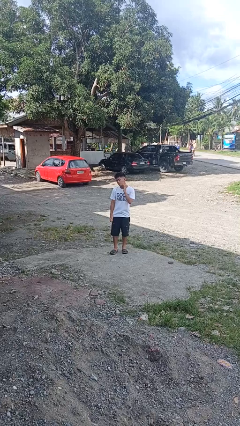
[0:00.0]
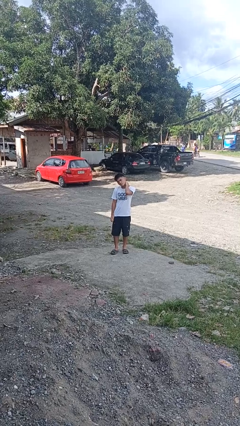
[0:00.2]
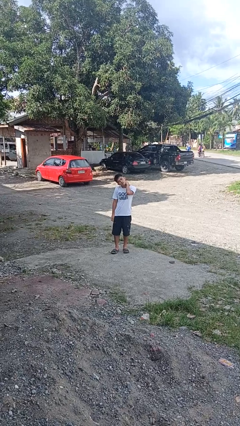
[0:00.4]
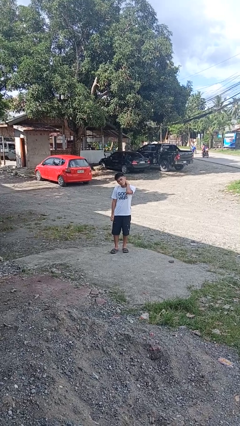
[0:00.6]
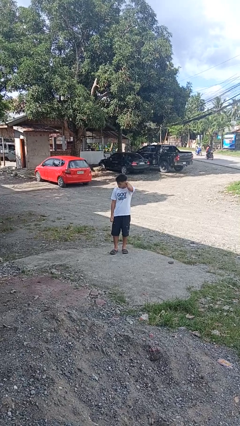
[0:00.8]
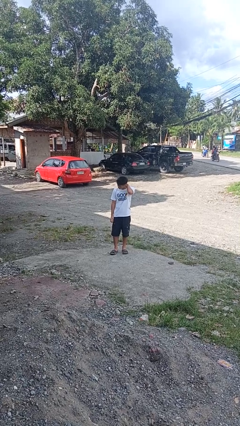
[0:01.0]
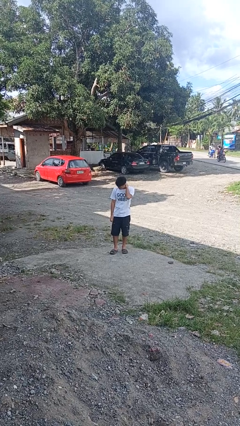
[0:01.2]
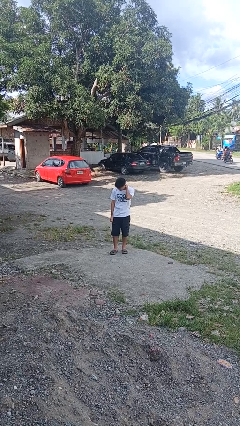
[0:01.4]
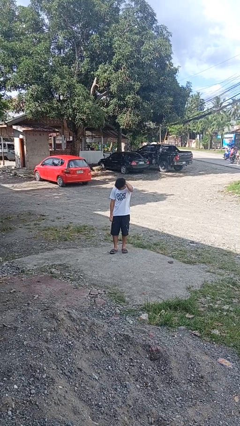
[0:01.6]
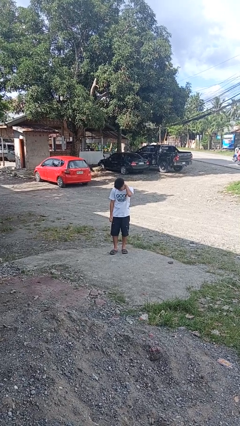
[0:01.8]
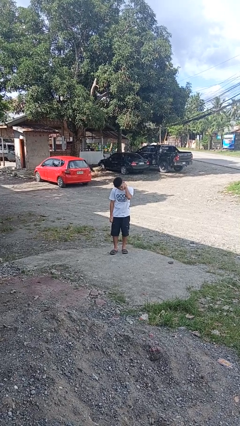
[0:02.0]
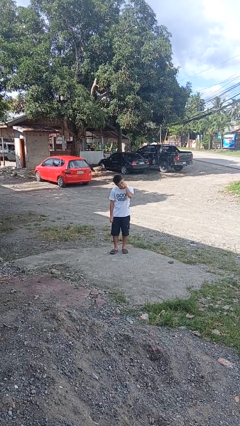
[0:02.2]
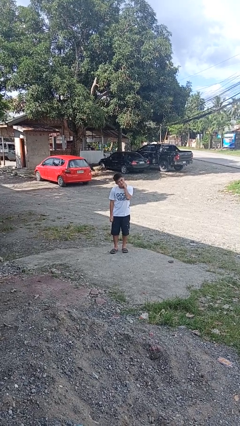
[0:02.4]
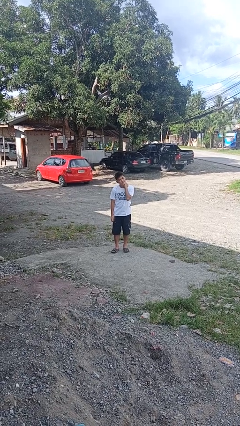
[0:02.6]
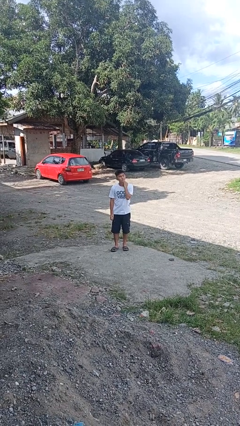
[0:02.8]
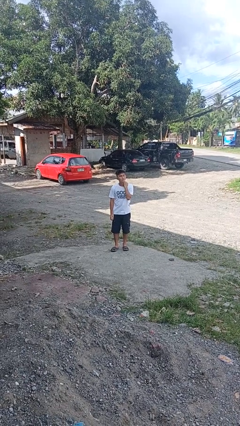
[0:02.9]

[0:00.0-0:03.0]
person rubs neck

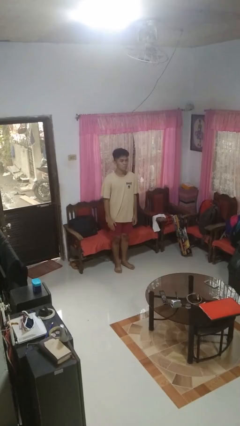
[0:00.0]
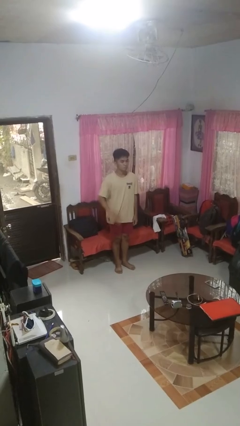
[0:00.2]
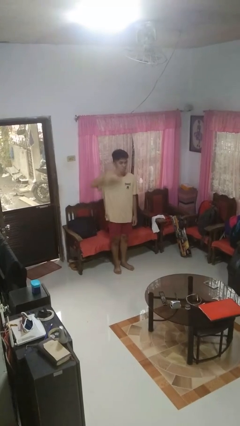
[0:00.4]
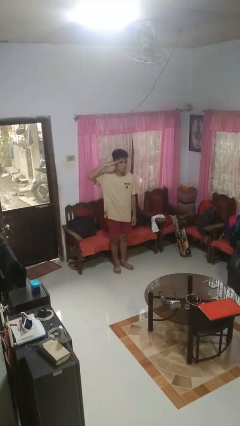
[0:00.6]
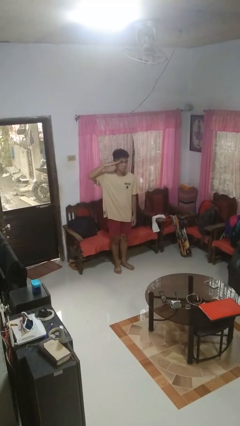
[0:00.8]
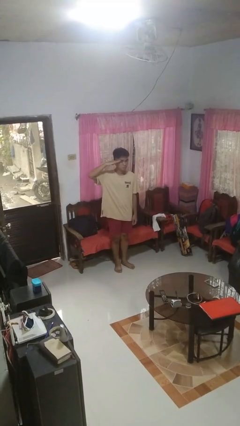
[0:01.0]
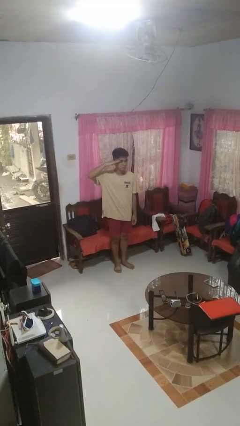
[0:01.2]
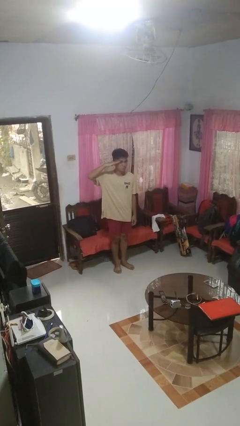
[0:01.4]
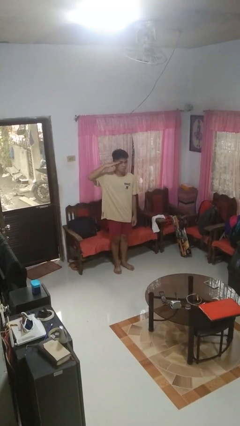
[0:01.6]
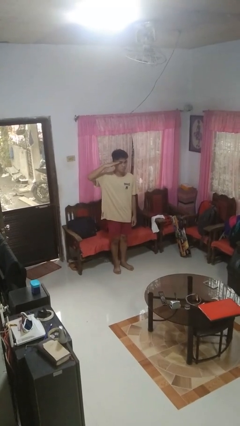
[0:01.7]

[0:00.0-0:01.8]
person salutes

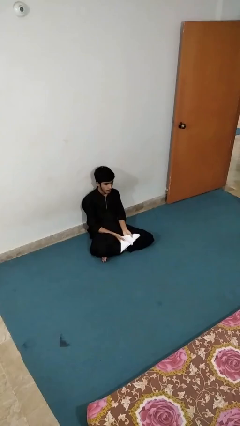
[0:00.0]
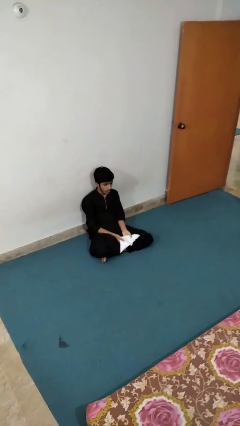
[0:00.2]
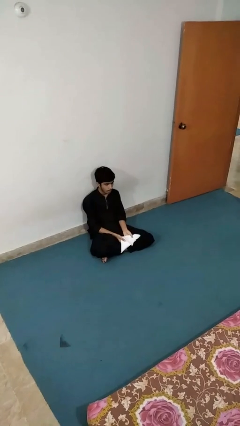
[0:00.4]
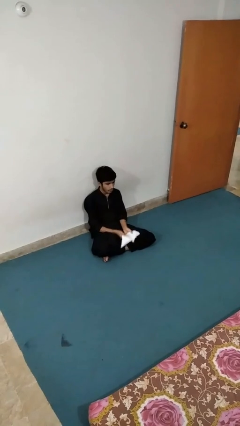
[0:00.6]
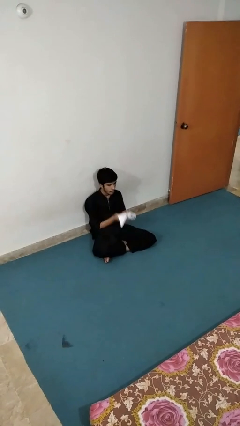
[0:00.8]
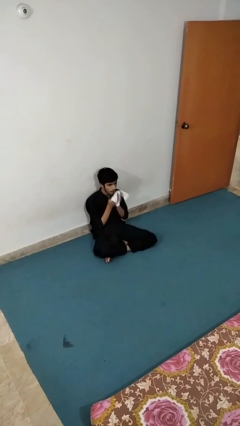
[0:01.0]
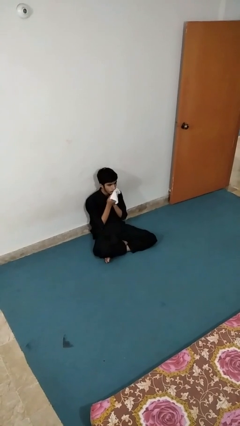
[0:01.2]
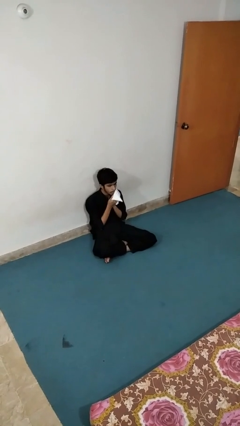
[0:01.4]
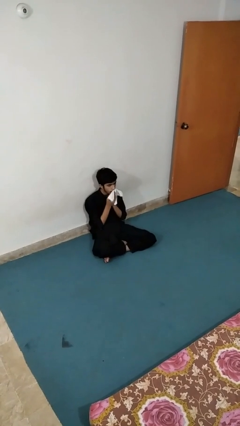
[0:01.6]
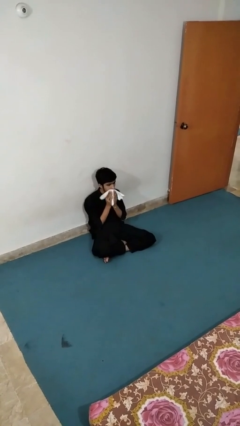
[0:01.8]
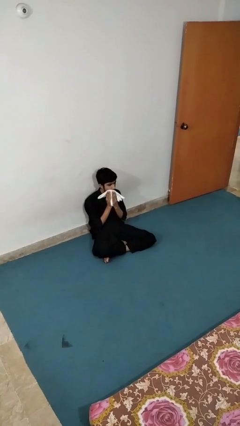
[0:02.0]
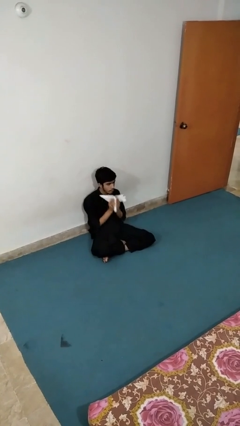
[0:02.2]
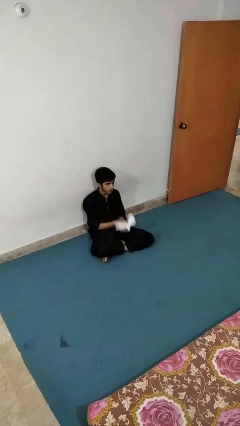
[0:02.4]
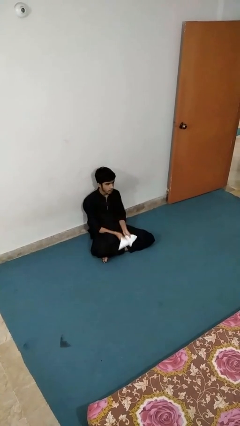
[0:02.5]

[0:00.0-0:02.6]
person wipes mouth with napkin

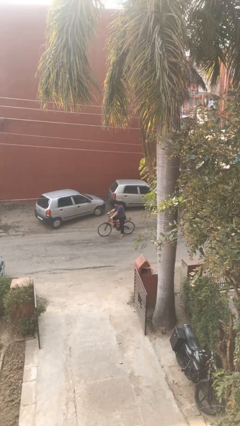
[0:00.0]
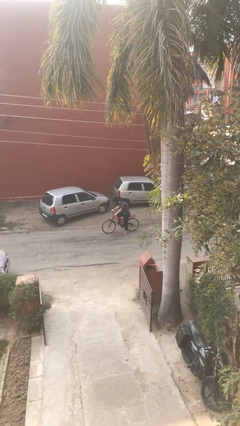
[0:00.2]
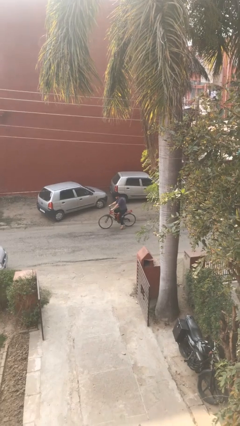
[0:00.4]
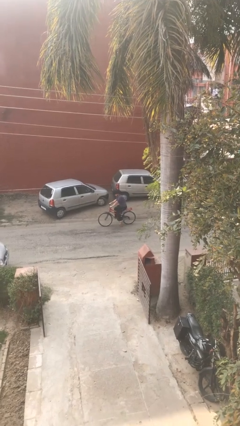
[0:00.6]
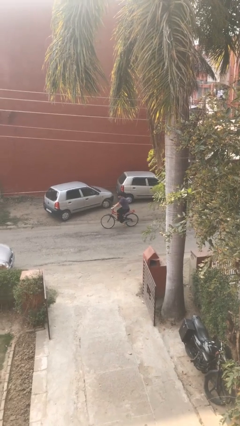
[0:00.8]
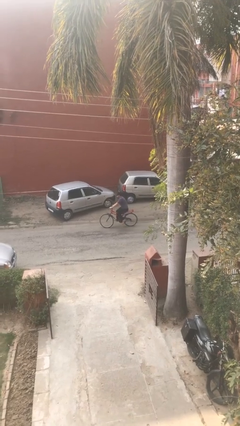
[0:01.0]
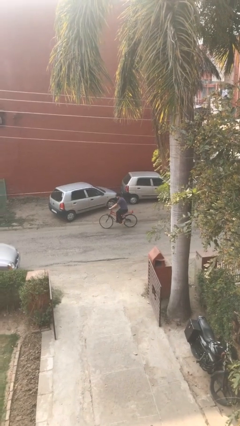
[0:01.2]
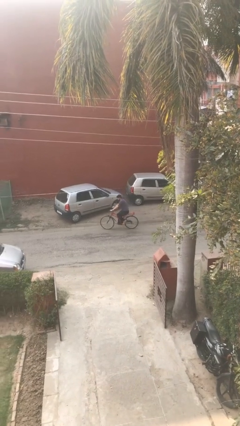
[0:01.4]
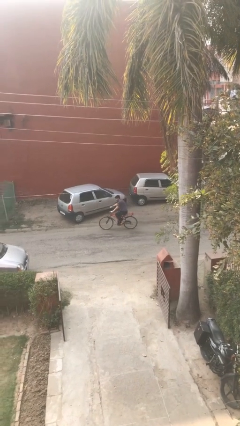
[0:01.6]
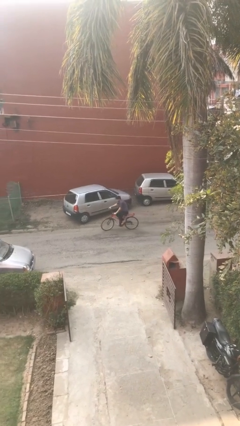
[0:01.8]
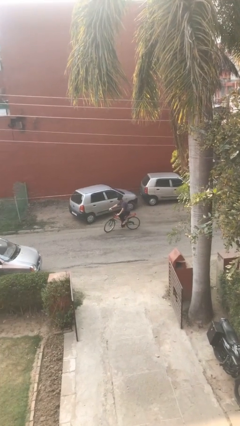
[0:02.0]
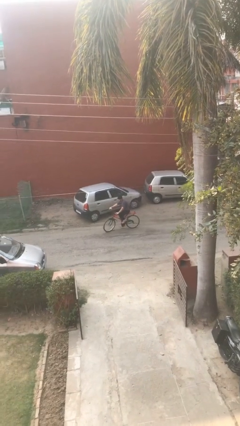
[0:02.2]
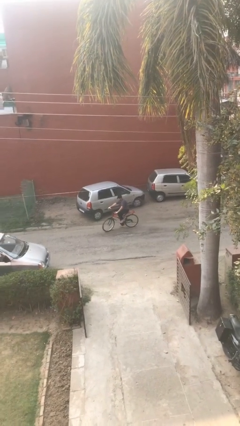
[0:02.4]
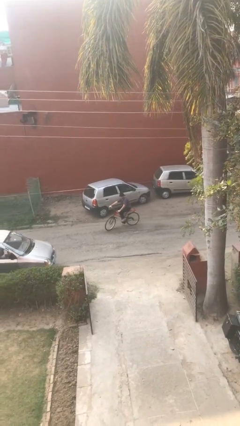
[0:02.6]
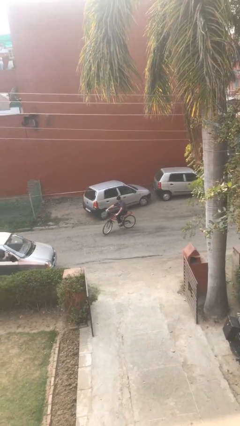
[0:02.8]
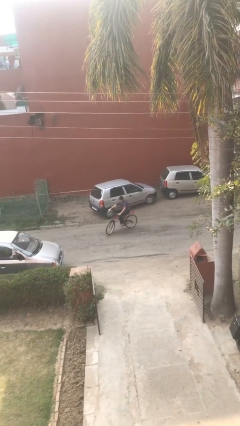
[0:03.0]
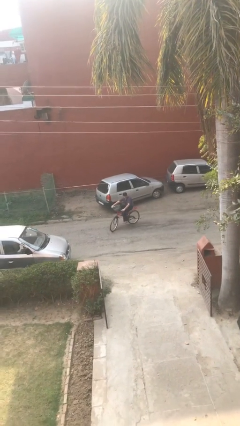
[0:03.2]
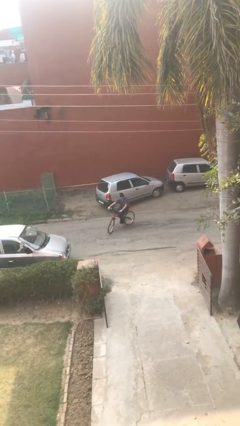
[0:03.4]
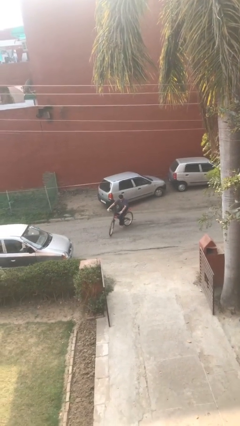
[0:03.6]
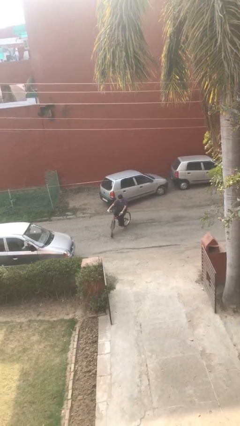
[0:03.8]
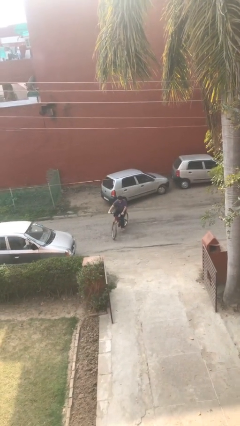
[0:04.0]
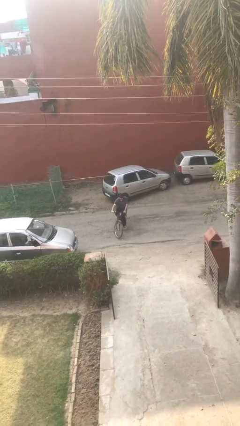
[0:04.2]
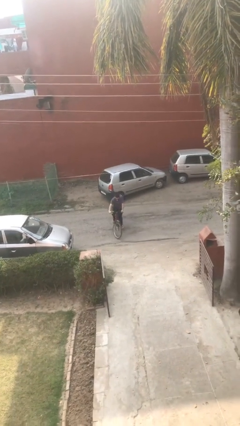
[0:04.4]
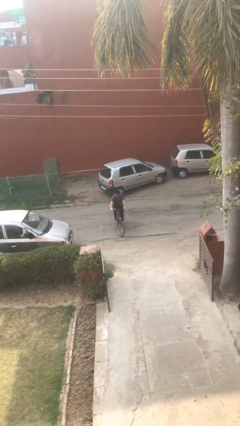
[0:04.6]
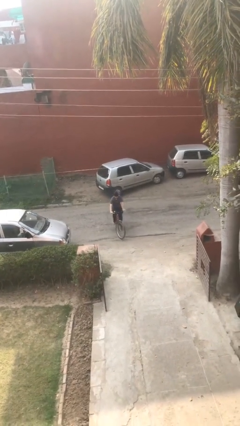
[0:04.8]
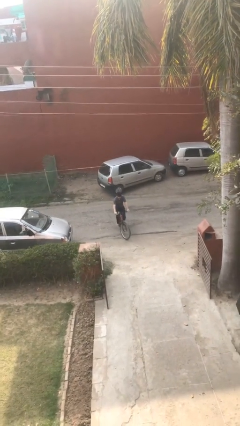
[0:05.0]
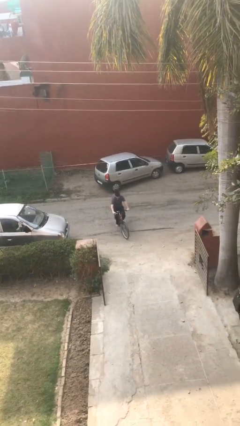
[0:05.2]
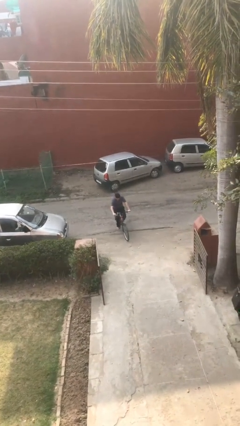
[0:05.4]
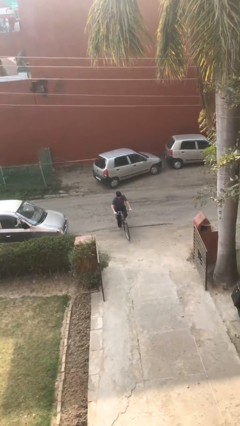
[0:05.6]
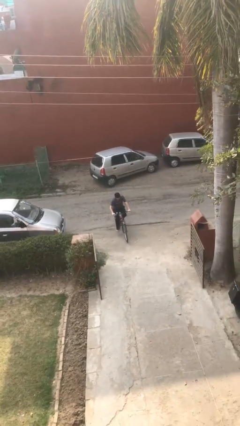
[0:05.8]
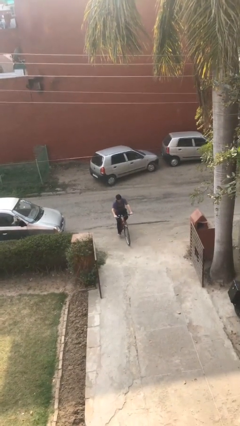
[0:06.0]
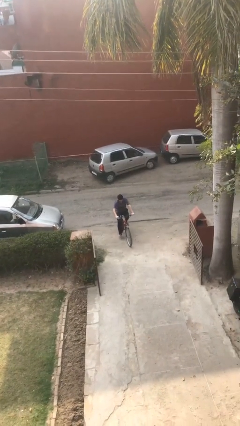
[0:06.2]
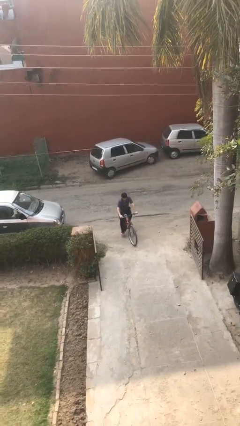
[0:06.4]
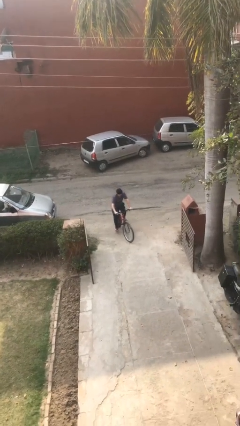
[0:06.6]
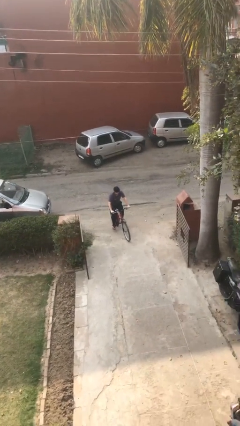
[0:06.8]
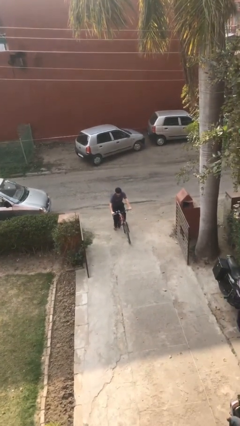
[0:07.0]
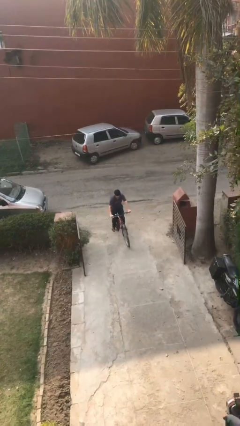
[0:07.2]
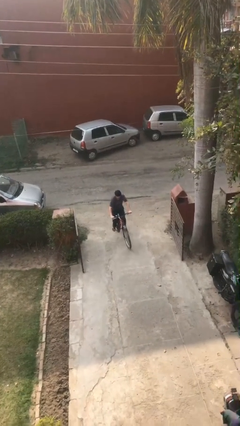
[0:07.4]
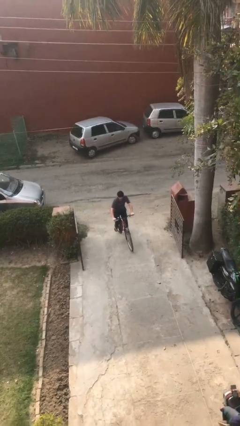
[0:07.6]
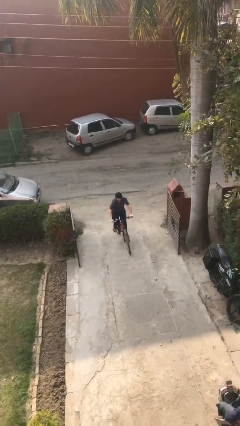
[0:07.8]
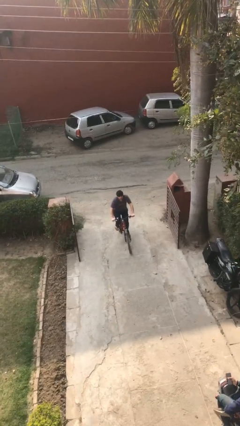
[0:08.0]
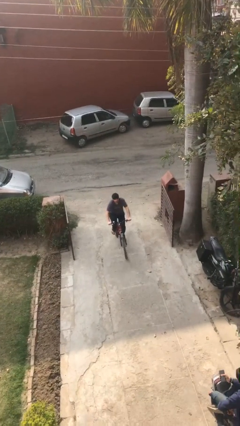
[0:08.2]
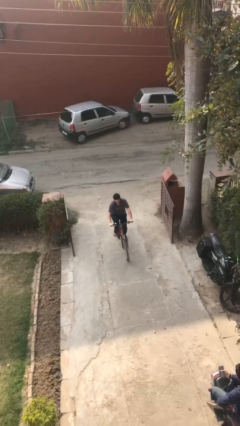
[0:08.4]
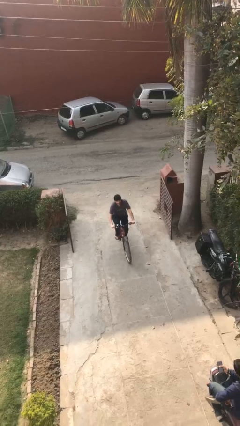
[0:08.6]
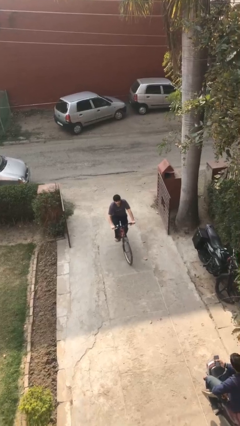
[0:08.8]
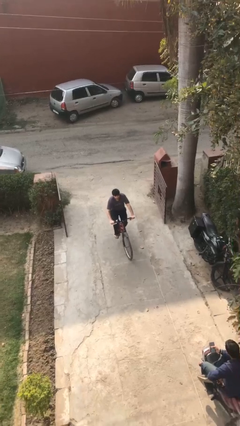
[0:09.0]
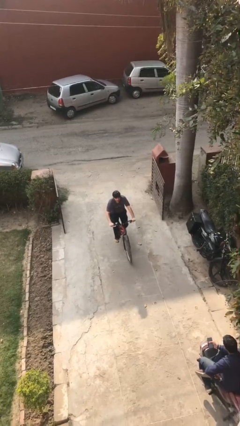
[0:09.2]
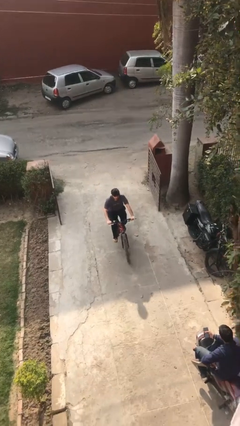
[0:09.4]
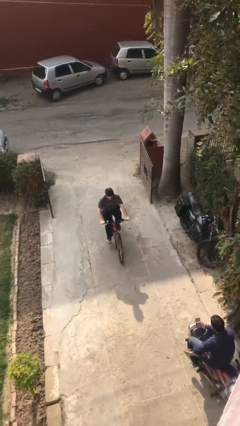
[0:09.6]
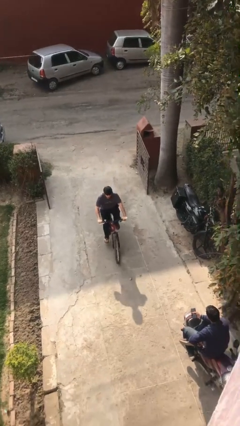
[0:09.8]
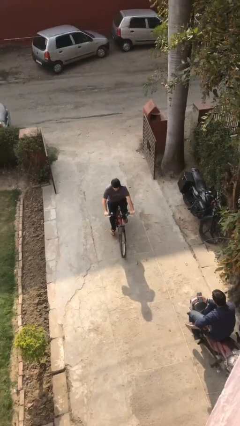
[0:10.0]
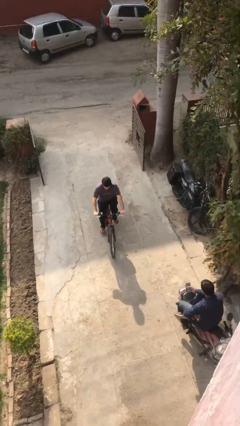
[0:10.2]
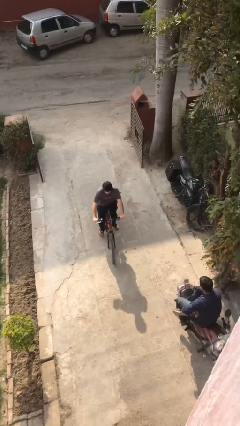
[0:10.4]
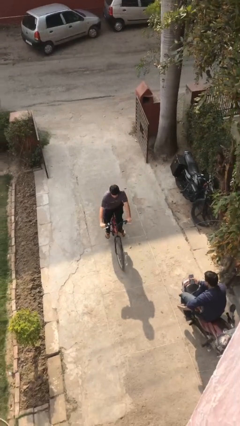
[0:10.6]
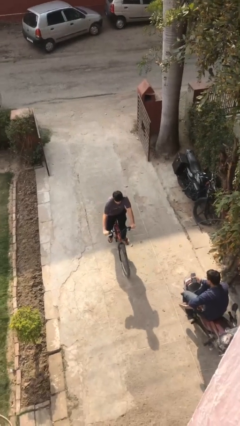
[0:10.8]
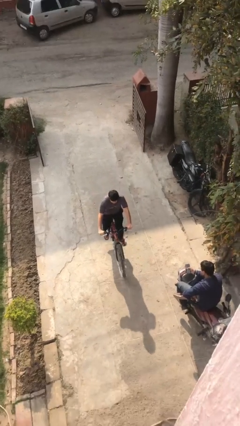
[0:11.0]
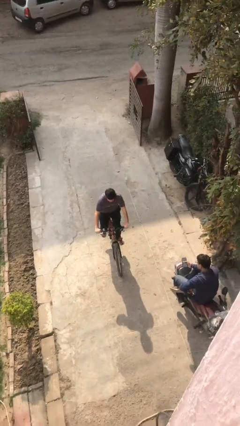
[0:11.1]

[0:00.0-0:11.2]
person rides bicycle
